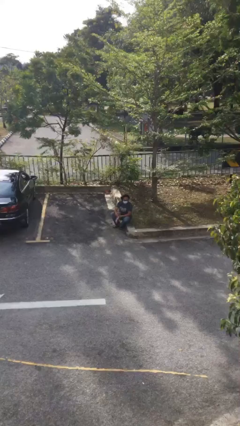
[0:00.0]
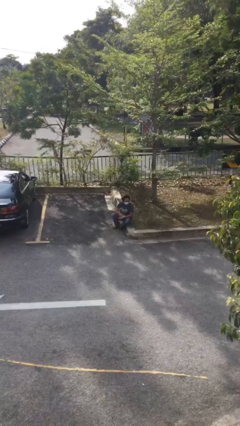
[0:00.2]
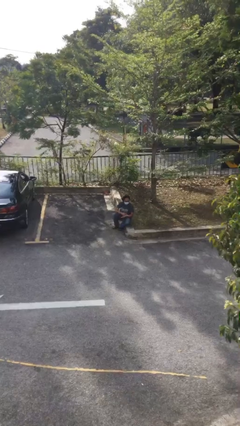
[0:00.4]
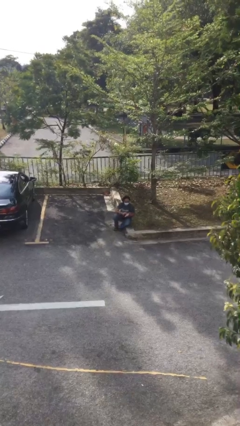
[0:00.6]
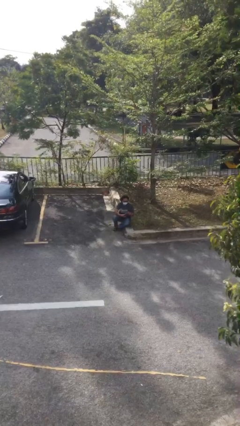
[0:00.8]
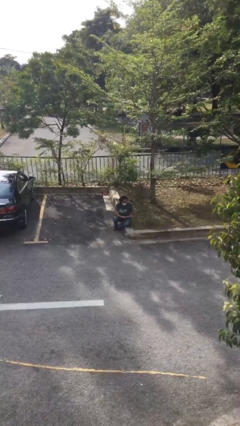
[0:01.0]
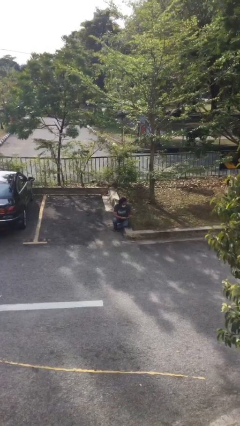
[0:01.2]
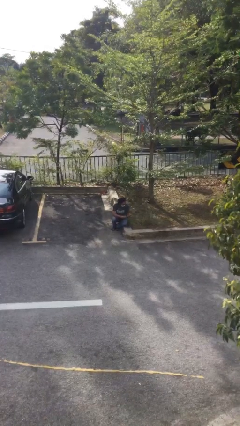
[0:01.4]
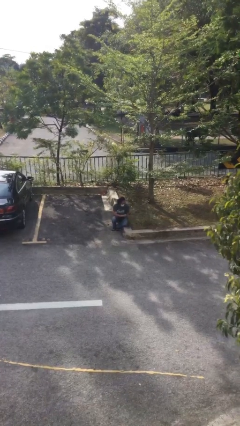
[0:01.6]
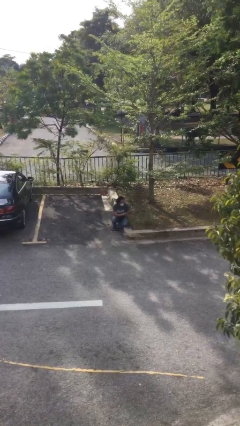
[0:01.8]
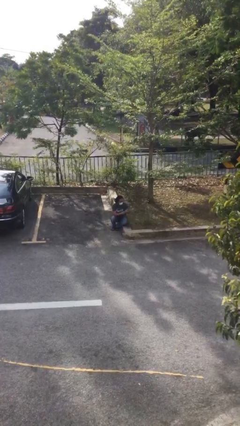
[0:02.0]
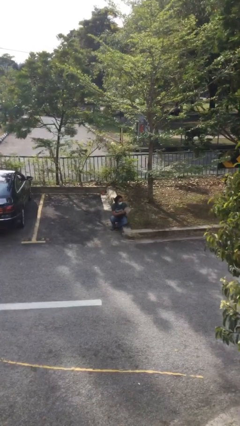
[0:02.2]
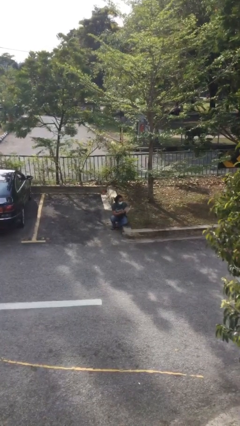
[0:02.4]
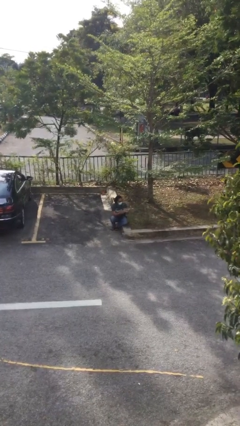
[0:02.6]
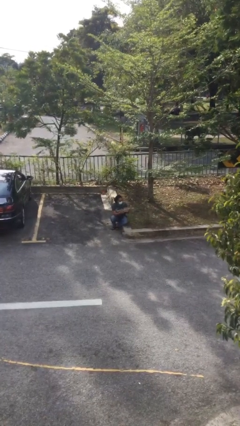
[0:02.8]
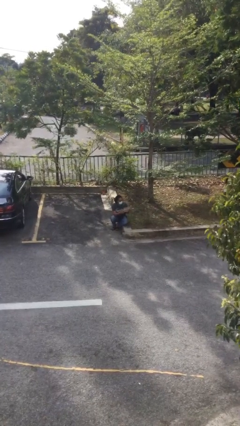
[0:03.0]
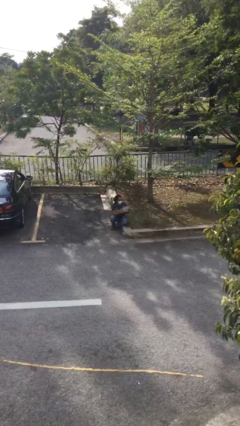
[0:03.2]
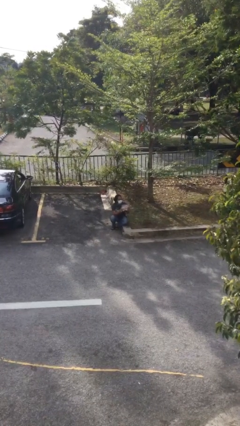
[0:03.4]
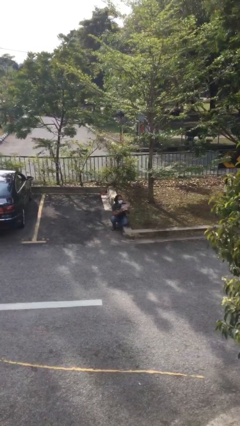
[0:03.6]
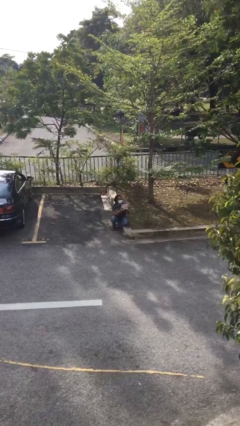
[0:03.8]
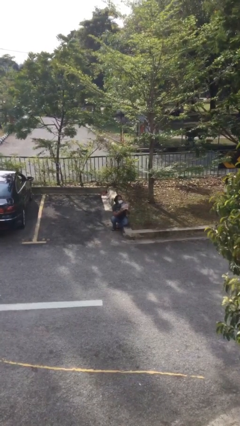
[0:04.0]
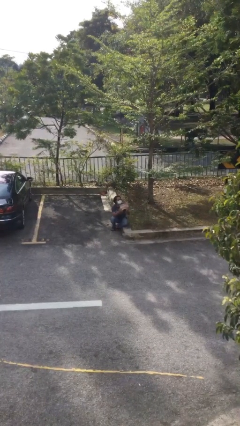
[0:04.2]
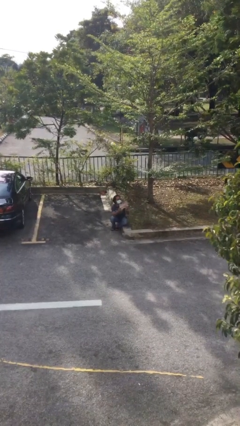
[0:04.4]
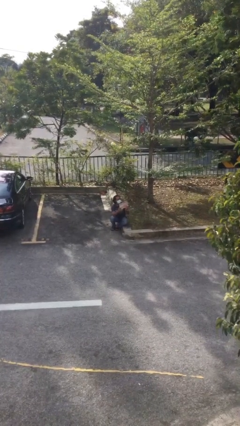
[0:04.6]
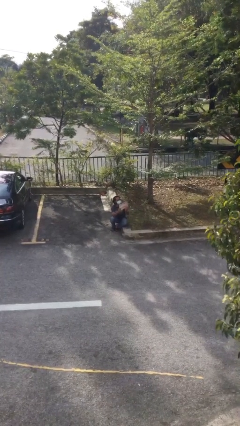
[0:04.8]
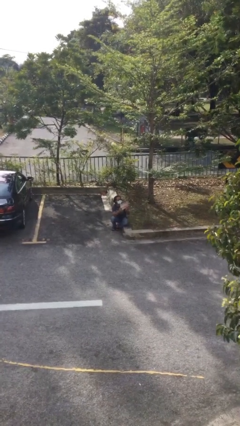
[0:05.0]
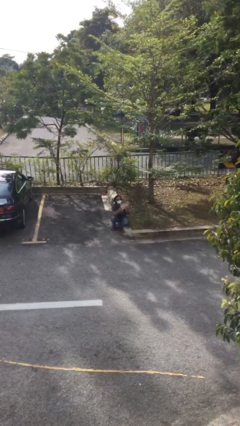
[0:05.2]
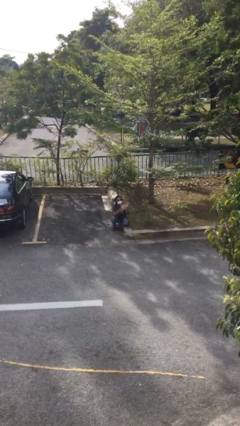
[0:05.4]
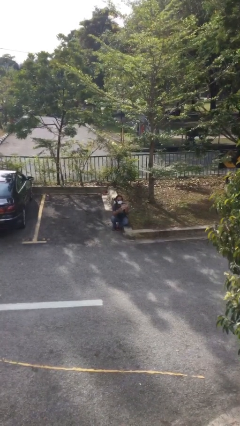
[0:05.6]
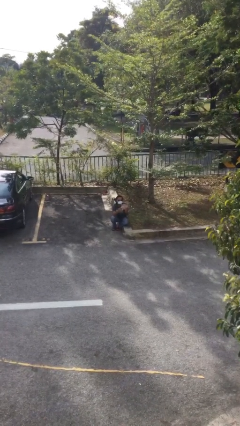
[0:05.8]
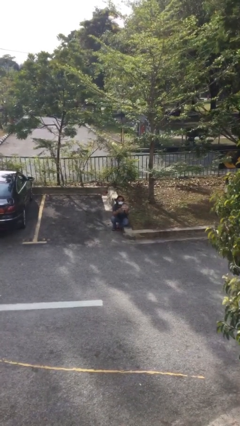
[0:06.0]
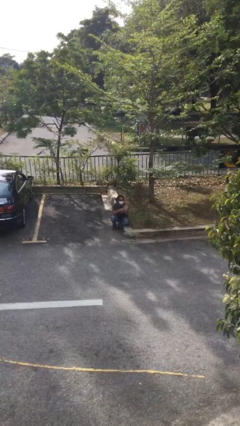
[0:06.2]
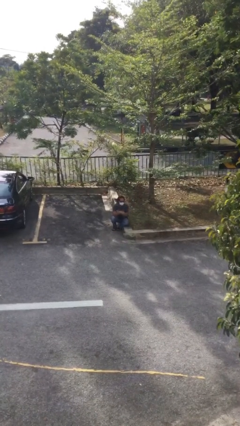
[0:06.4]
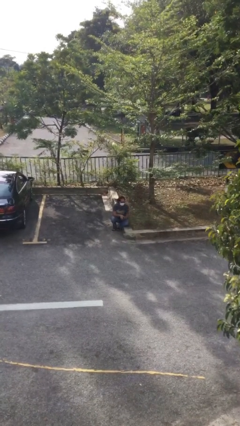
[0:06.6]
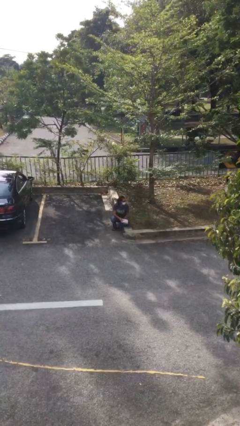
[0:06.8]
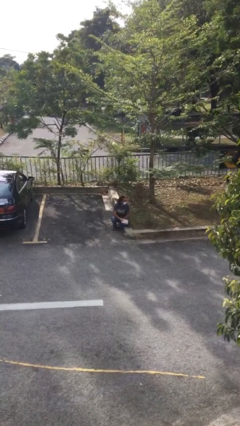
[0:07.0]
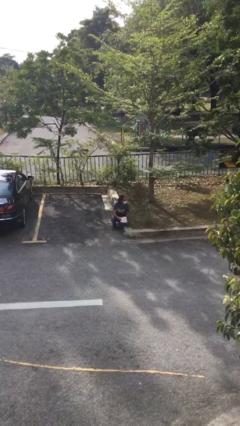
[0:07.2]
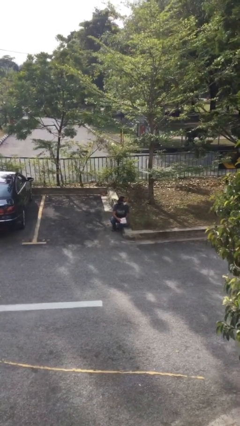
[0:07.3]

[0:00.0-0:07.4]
person reads document

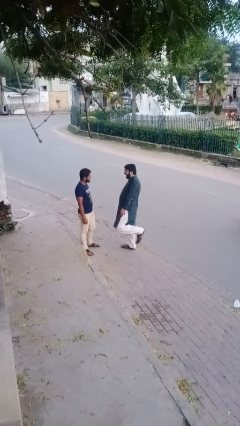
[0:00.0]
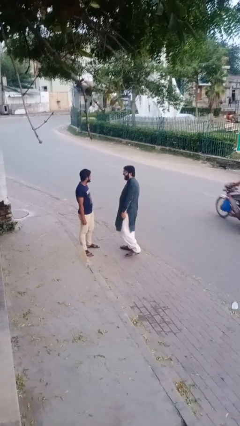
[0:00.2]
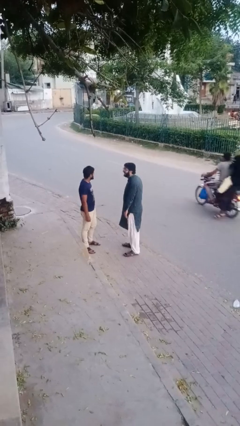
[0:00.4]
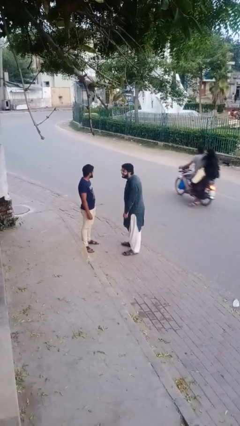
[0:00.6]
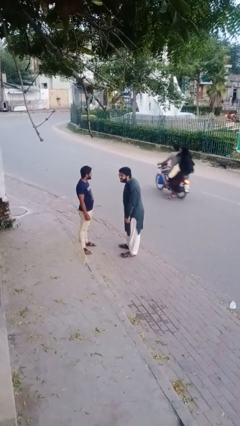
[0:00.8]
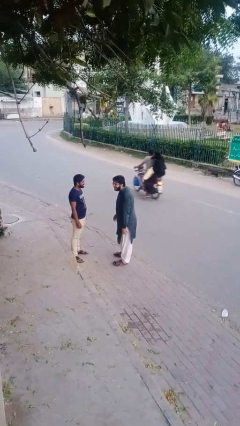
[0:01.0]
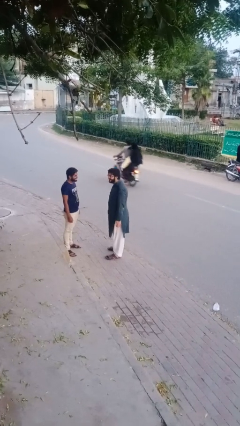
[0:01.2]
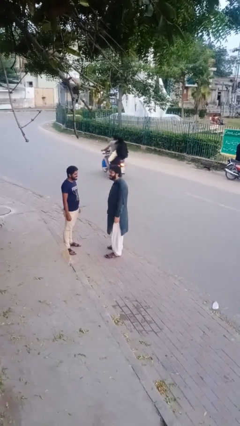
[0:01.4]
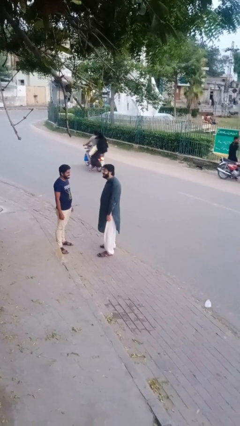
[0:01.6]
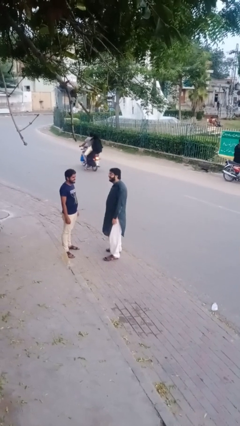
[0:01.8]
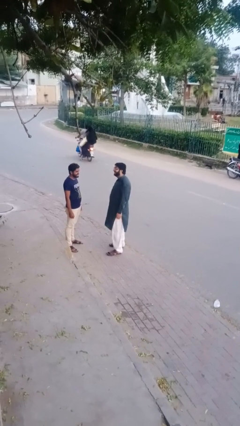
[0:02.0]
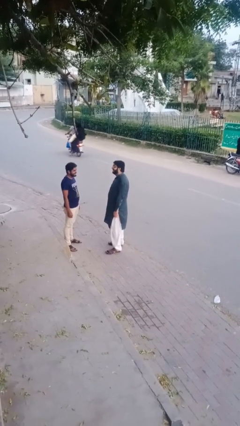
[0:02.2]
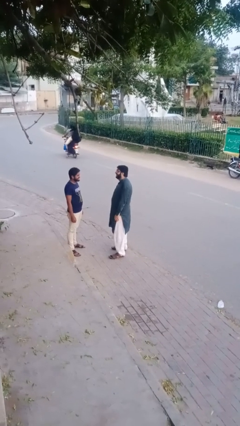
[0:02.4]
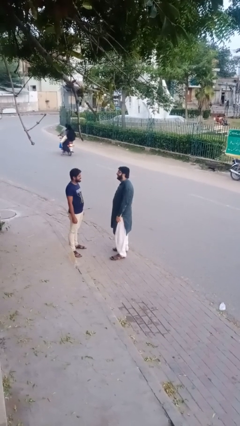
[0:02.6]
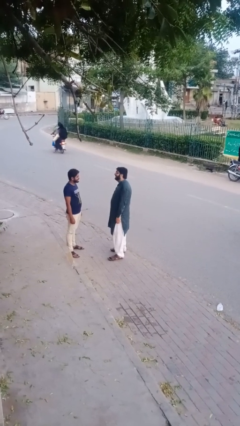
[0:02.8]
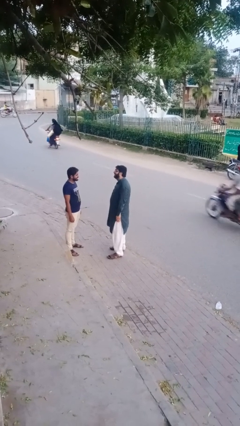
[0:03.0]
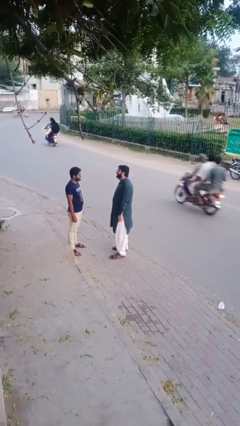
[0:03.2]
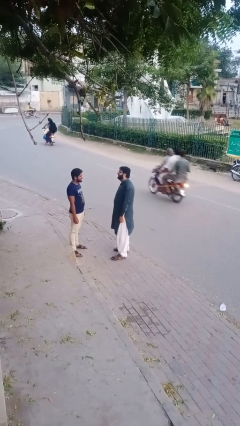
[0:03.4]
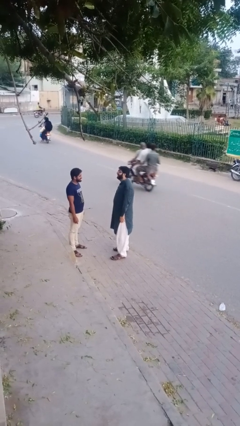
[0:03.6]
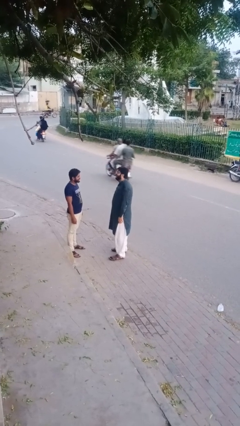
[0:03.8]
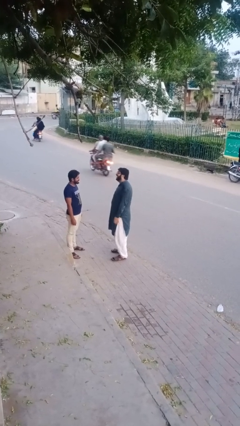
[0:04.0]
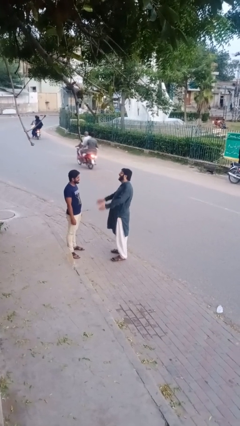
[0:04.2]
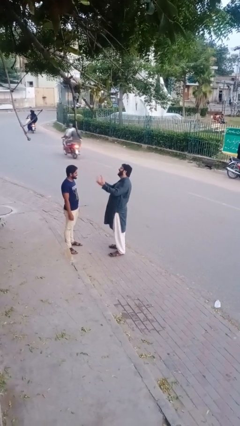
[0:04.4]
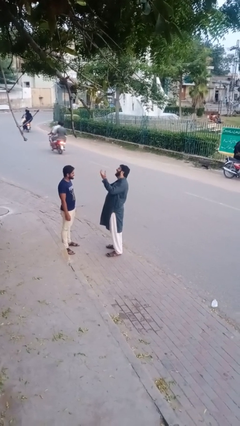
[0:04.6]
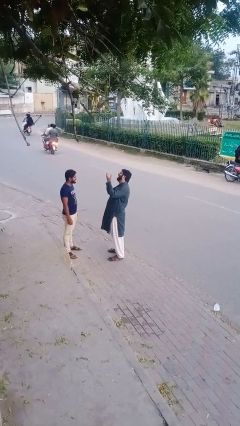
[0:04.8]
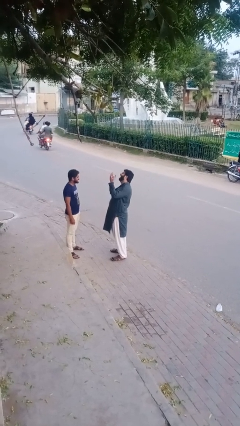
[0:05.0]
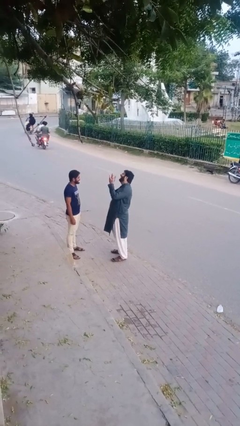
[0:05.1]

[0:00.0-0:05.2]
person laughs with person

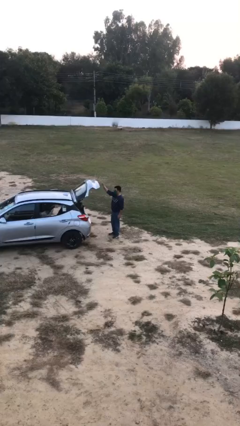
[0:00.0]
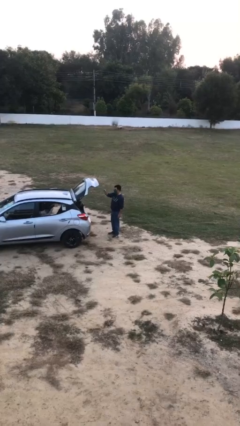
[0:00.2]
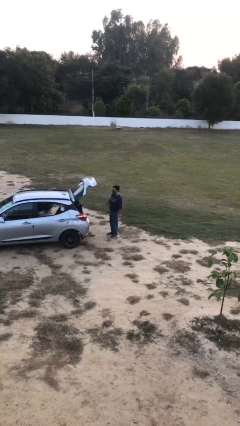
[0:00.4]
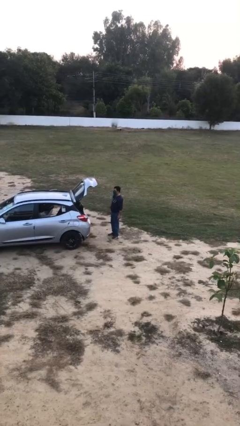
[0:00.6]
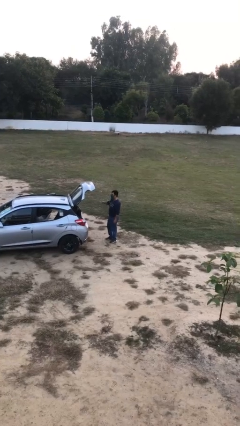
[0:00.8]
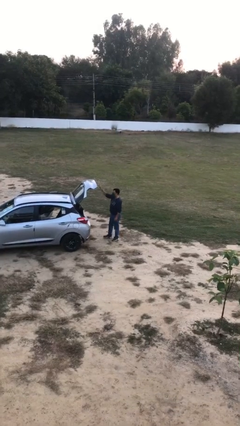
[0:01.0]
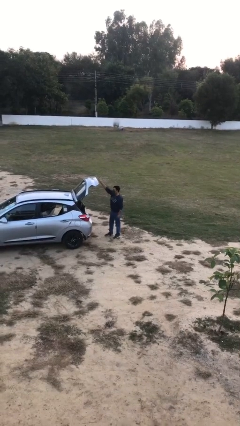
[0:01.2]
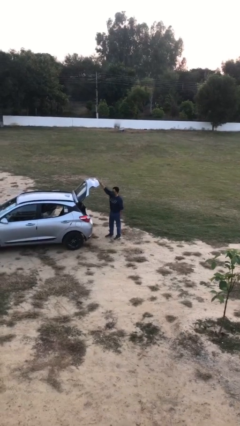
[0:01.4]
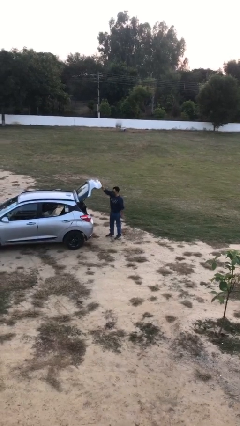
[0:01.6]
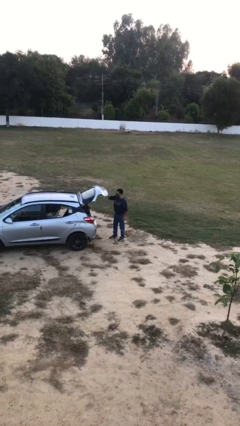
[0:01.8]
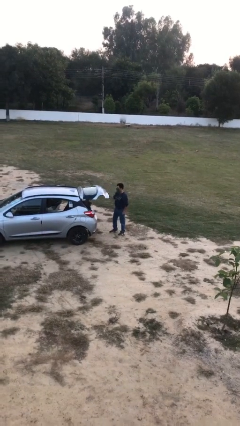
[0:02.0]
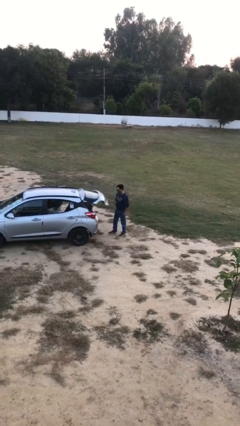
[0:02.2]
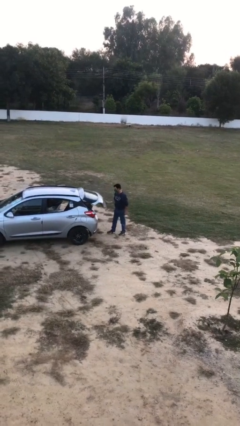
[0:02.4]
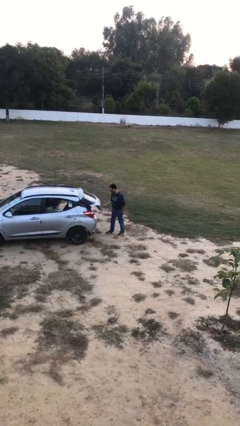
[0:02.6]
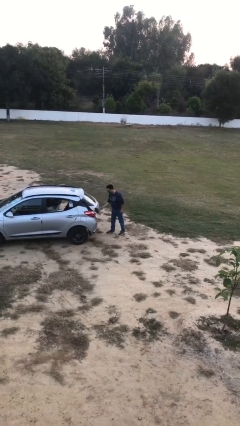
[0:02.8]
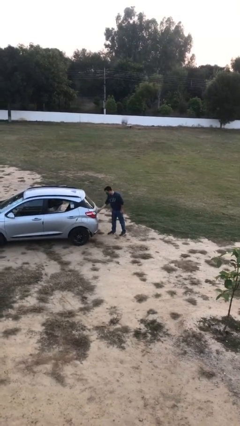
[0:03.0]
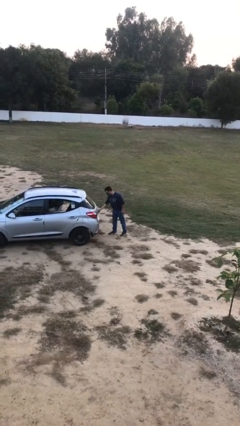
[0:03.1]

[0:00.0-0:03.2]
person closes car trunk

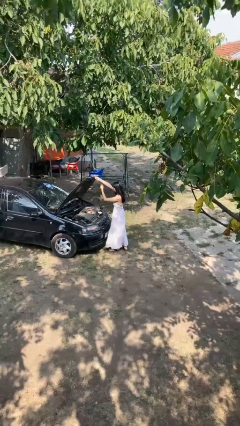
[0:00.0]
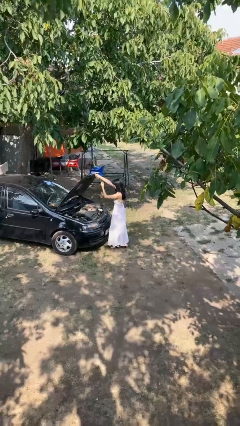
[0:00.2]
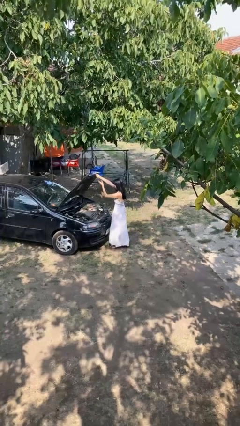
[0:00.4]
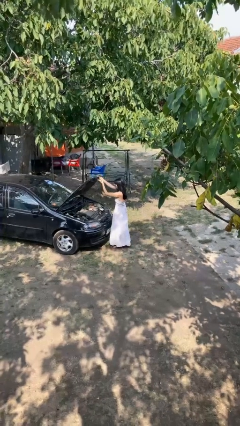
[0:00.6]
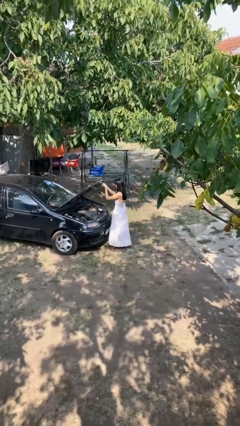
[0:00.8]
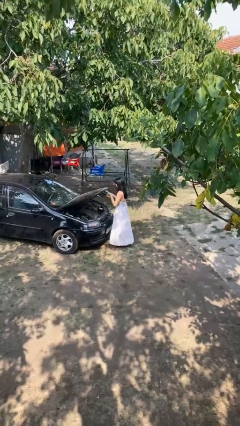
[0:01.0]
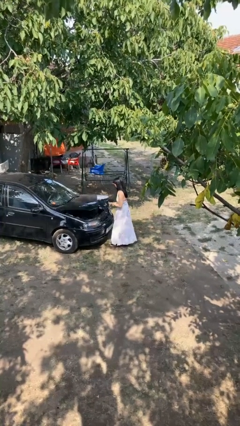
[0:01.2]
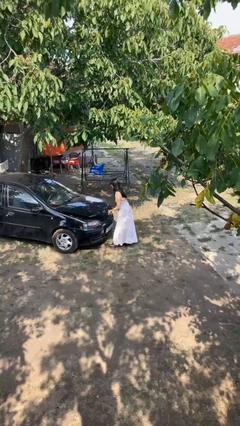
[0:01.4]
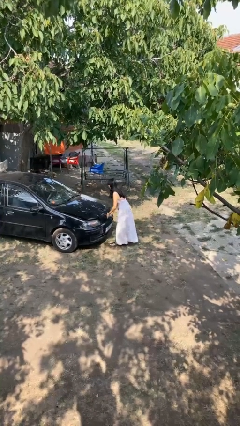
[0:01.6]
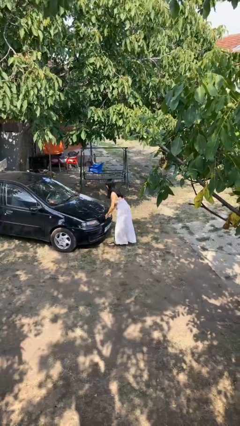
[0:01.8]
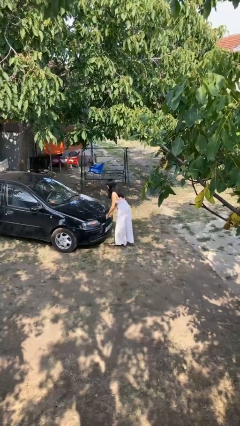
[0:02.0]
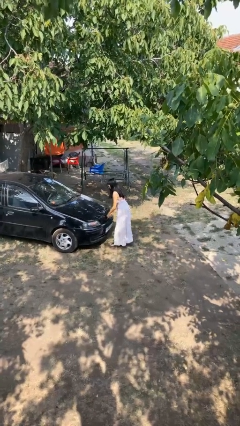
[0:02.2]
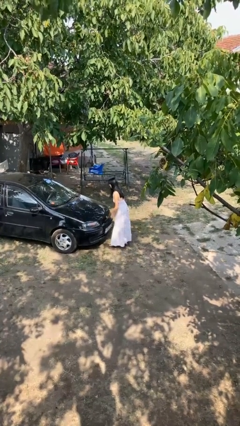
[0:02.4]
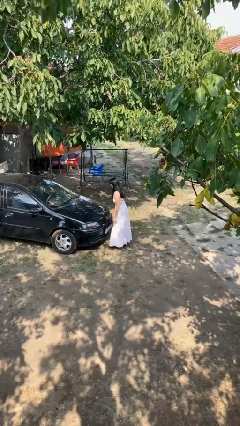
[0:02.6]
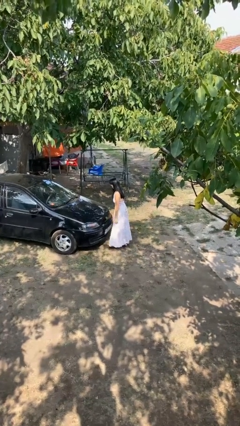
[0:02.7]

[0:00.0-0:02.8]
person closes car hood
